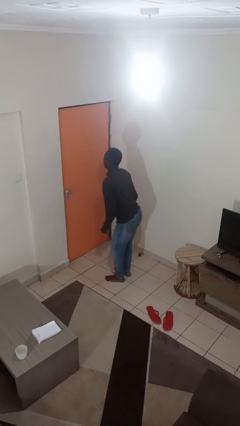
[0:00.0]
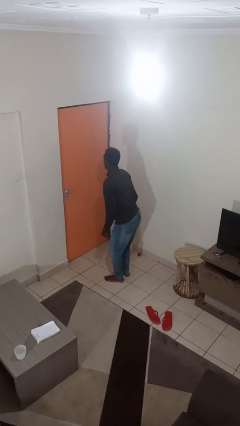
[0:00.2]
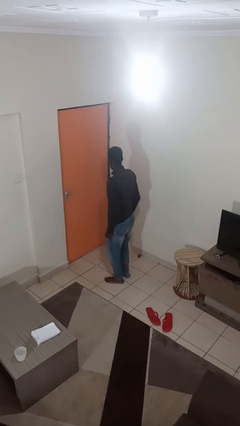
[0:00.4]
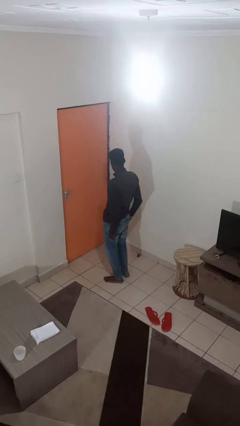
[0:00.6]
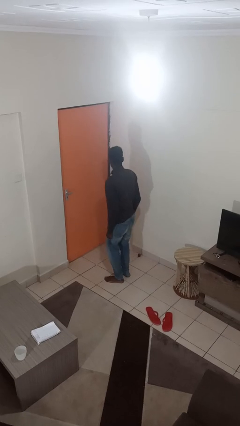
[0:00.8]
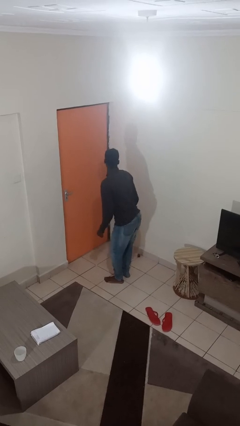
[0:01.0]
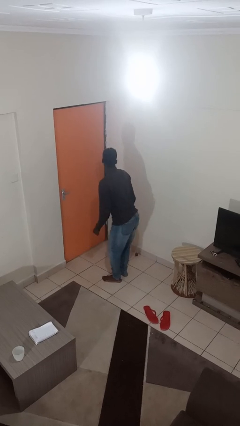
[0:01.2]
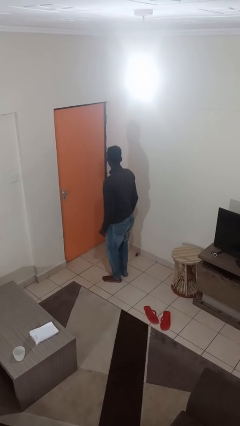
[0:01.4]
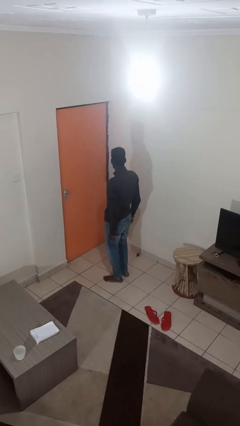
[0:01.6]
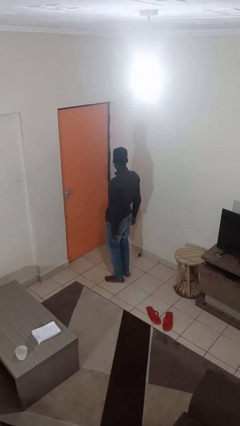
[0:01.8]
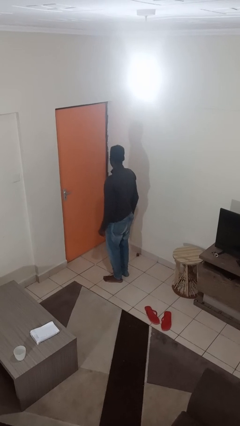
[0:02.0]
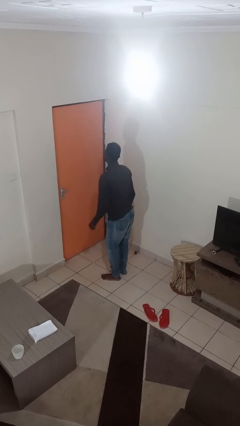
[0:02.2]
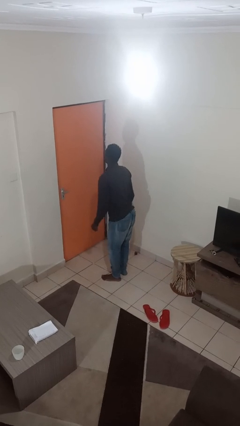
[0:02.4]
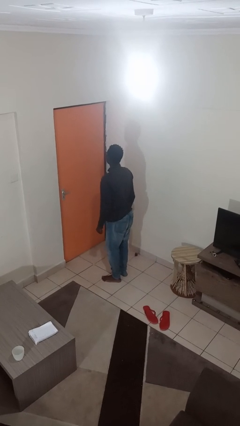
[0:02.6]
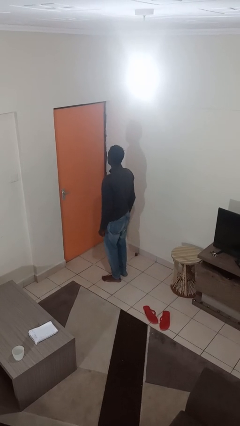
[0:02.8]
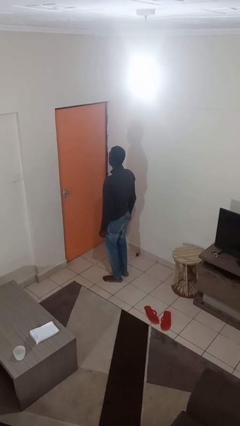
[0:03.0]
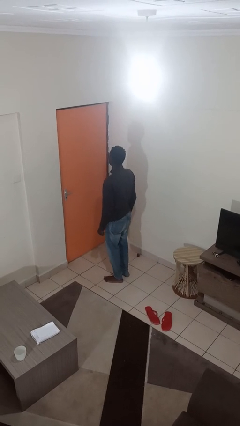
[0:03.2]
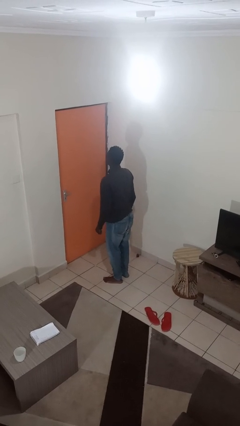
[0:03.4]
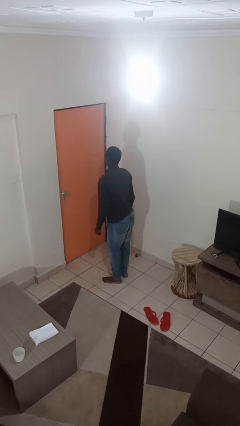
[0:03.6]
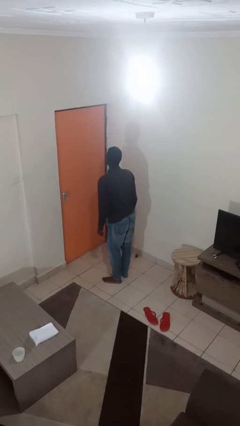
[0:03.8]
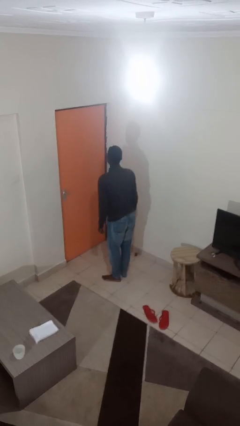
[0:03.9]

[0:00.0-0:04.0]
person wiggles hips

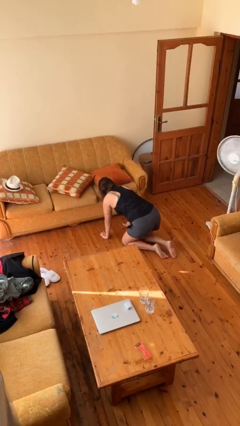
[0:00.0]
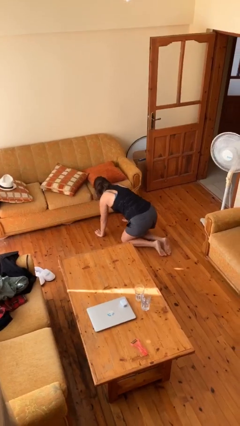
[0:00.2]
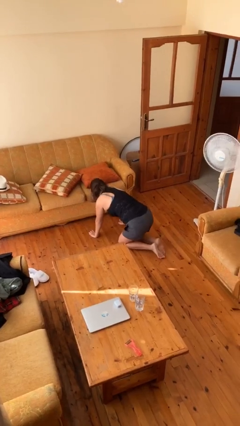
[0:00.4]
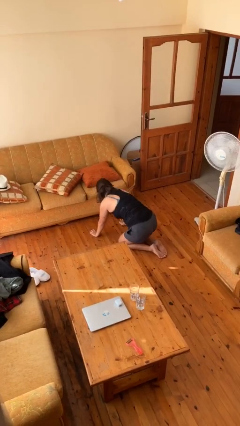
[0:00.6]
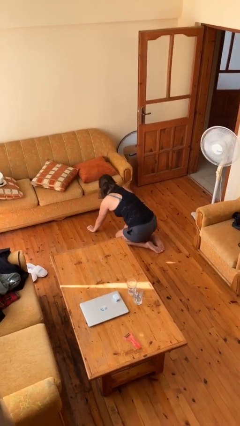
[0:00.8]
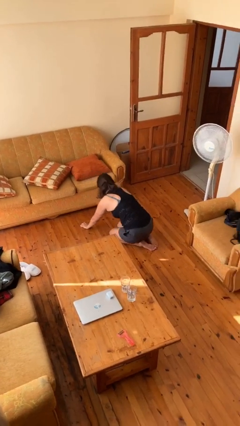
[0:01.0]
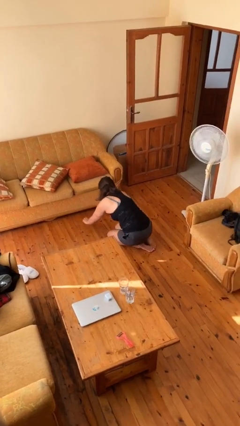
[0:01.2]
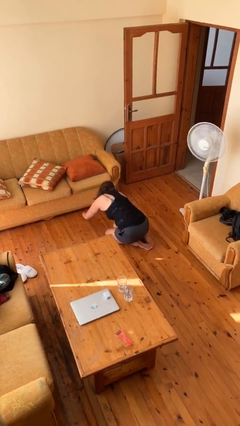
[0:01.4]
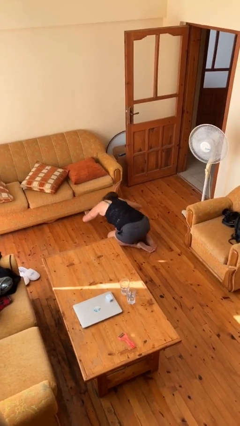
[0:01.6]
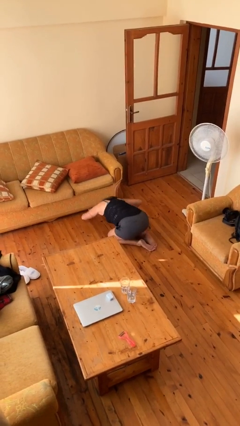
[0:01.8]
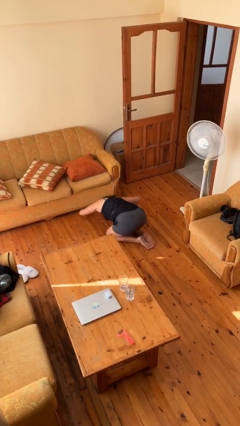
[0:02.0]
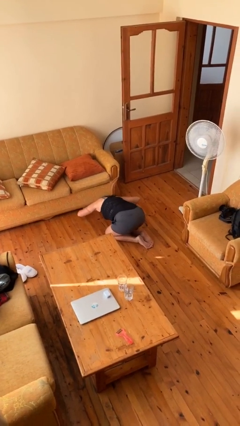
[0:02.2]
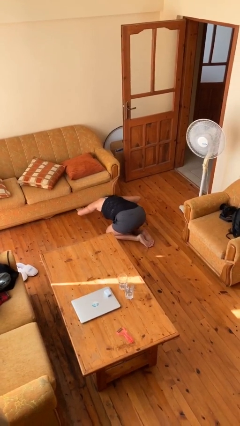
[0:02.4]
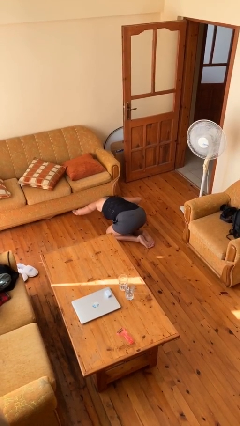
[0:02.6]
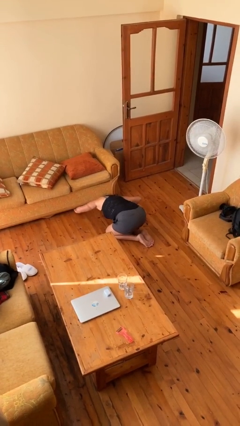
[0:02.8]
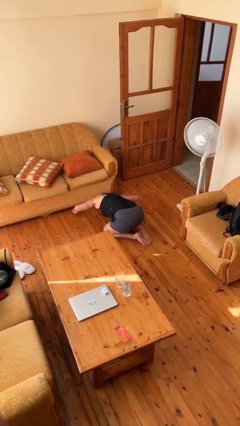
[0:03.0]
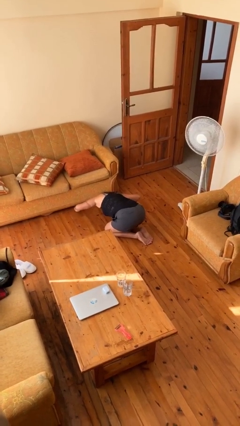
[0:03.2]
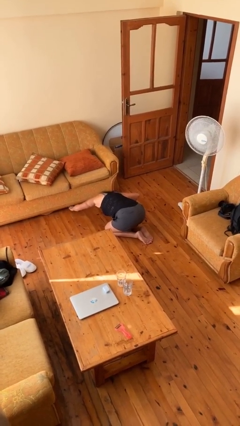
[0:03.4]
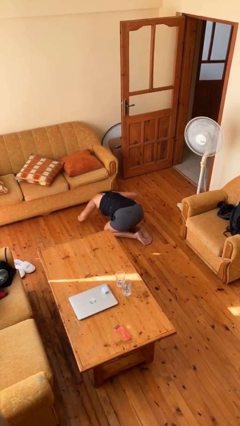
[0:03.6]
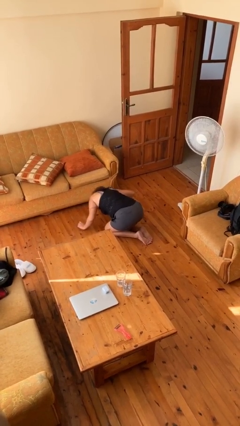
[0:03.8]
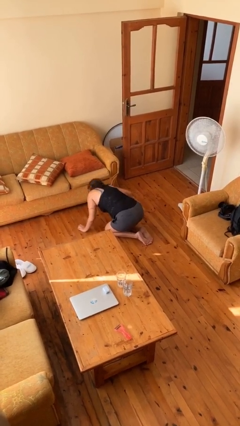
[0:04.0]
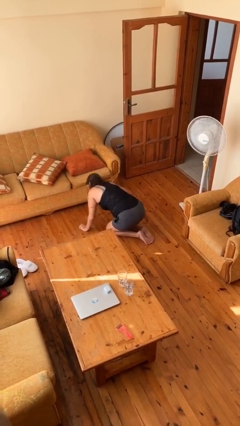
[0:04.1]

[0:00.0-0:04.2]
person searches under couch

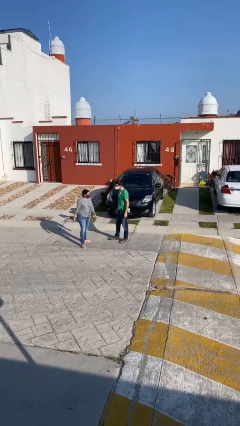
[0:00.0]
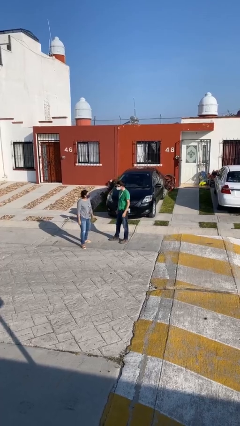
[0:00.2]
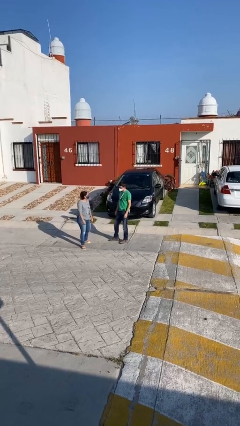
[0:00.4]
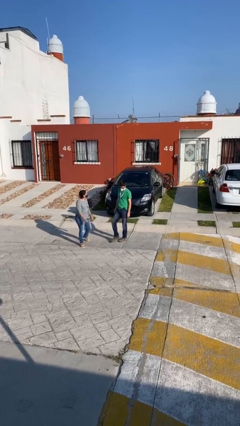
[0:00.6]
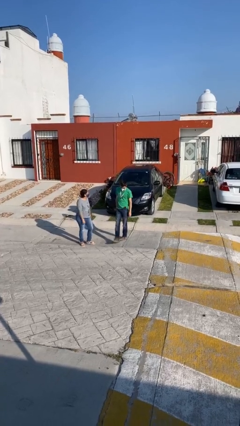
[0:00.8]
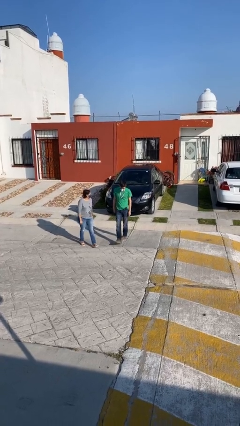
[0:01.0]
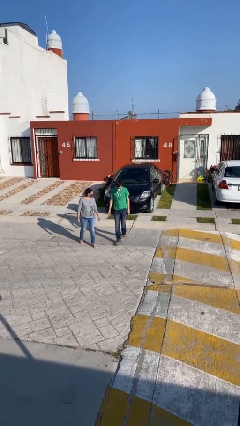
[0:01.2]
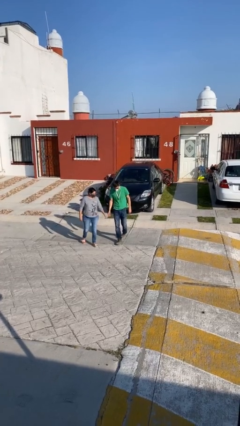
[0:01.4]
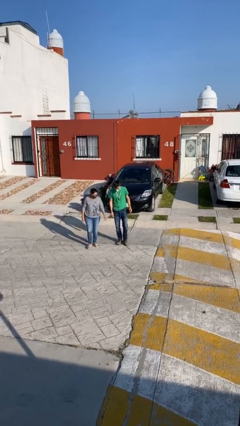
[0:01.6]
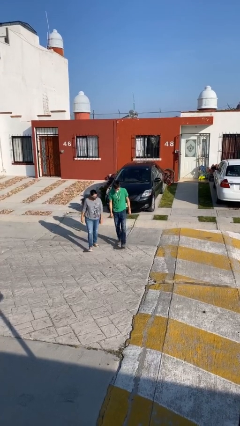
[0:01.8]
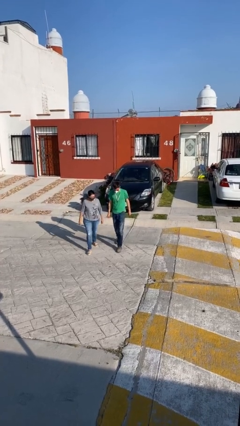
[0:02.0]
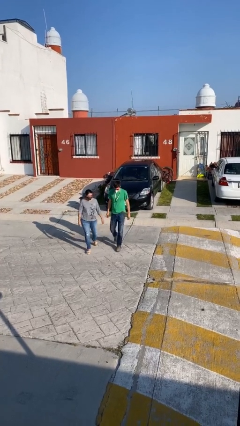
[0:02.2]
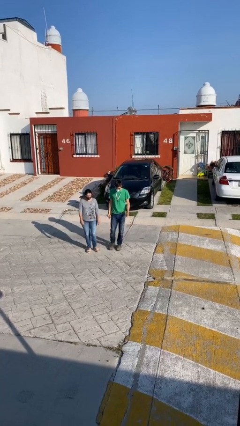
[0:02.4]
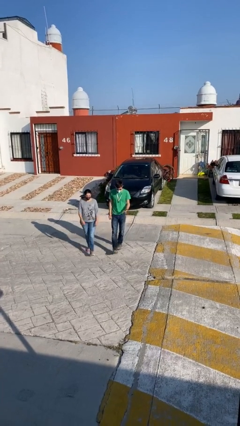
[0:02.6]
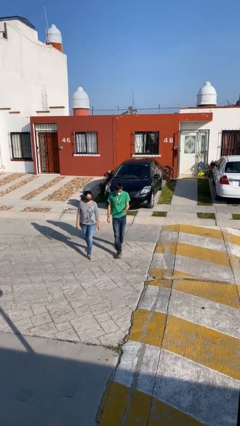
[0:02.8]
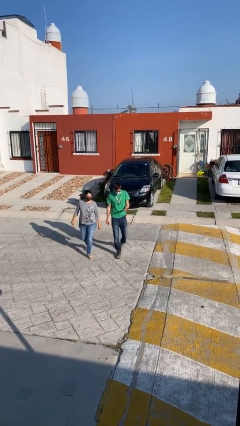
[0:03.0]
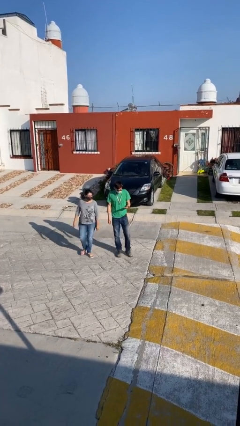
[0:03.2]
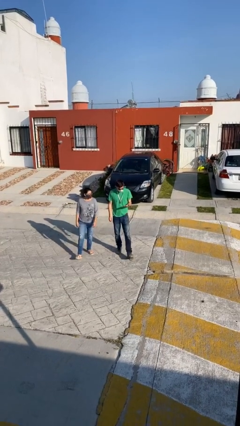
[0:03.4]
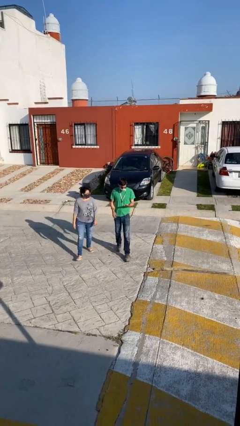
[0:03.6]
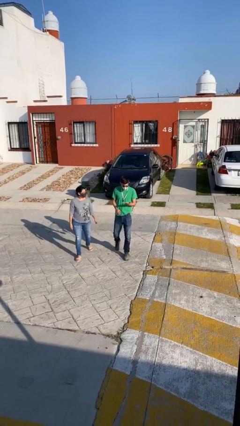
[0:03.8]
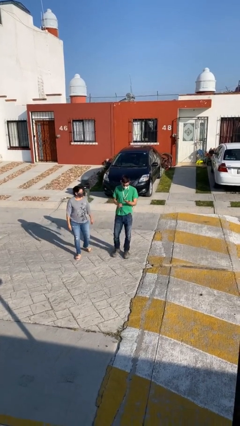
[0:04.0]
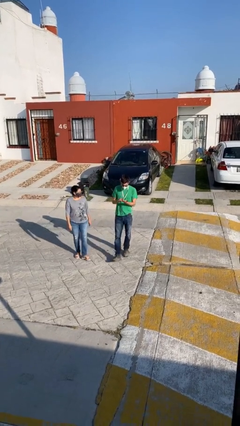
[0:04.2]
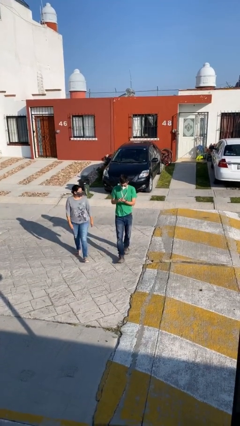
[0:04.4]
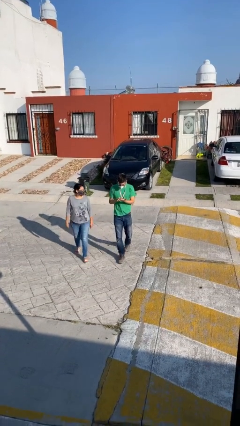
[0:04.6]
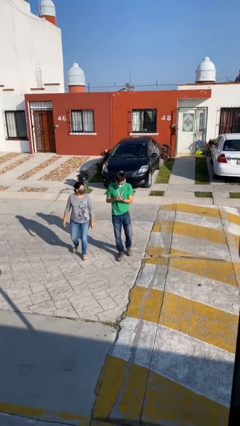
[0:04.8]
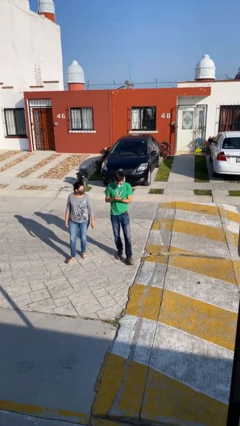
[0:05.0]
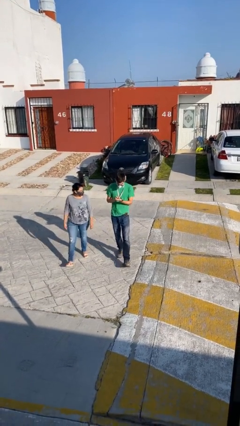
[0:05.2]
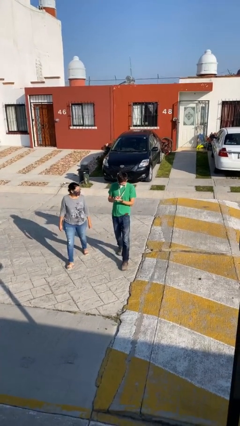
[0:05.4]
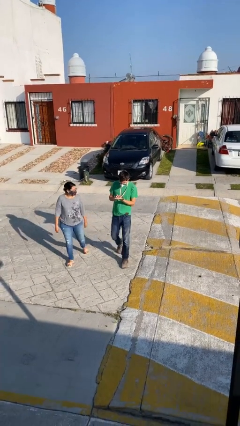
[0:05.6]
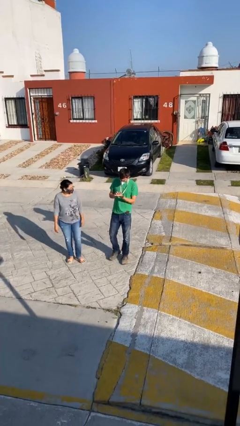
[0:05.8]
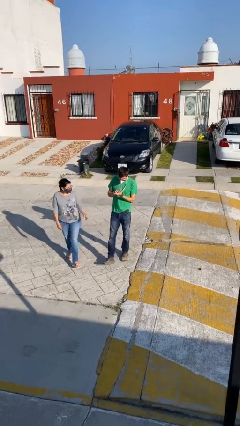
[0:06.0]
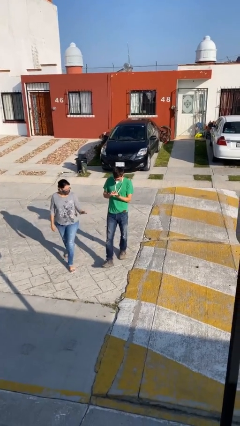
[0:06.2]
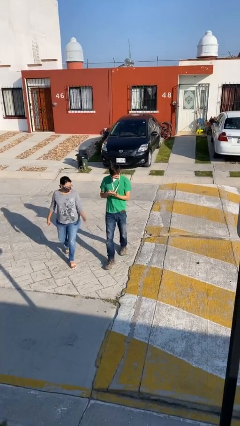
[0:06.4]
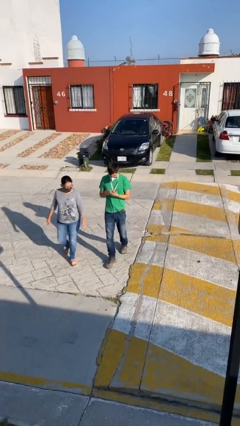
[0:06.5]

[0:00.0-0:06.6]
person talks to person

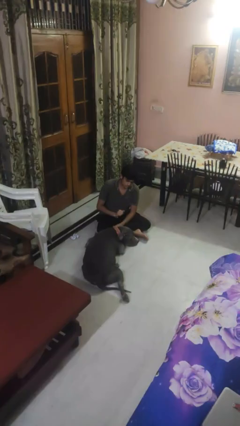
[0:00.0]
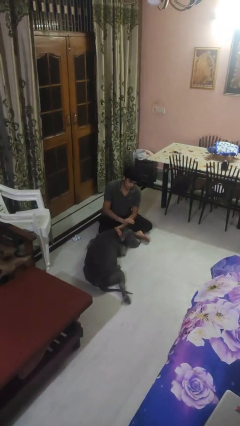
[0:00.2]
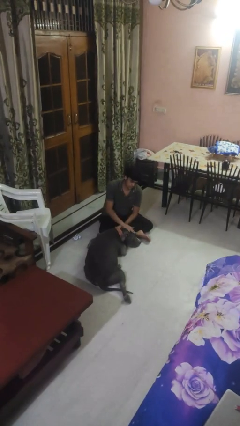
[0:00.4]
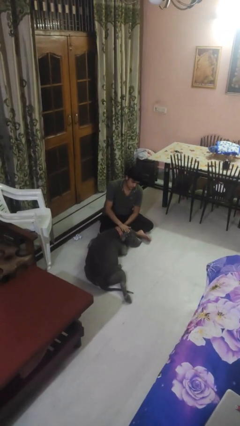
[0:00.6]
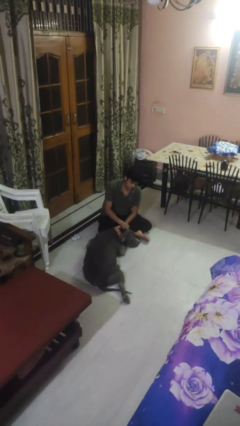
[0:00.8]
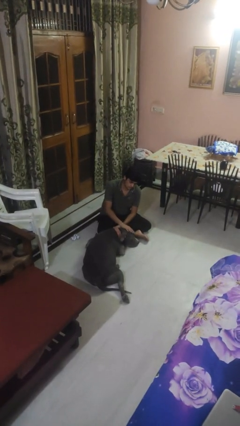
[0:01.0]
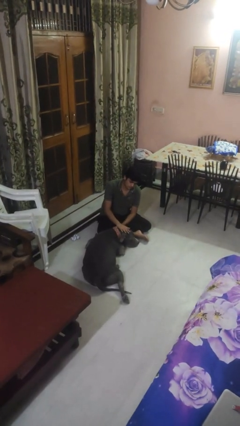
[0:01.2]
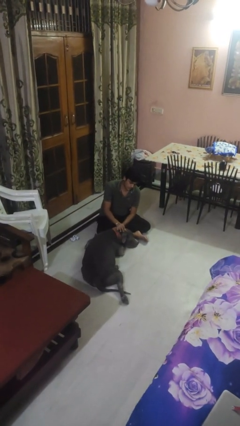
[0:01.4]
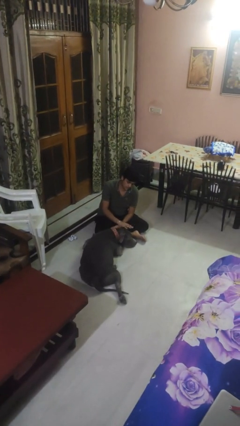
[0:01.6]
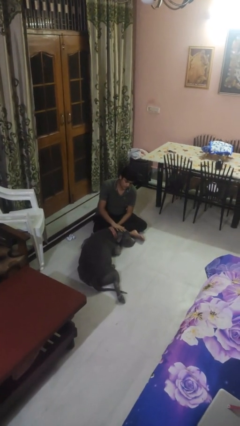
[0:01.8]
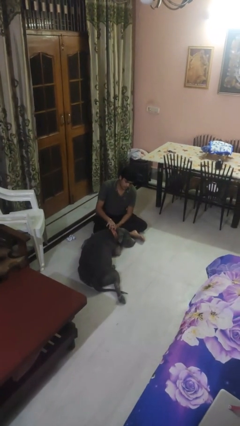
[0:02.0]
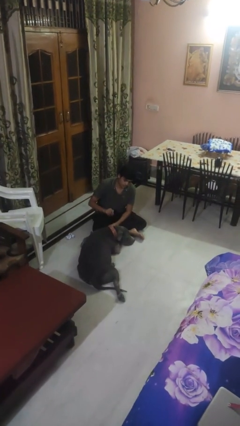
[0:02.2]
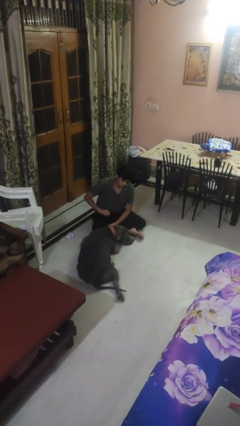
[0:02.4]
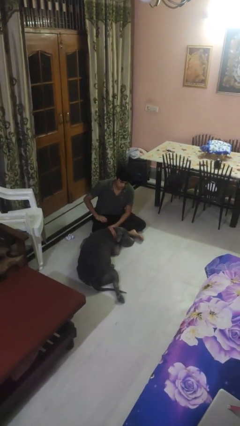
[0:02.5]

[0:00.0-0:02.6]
person pets dog

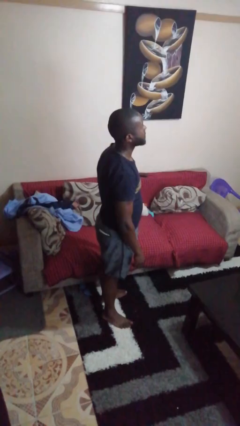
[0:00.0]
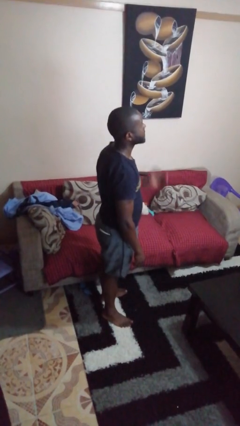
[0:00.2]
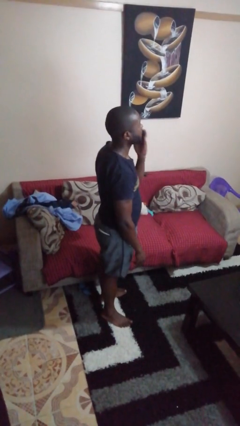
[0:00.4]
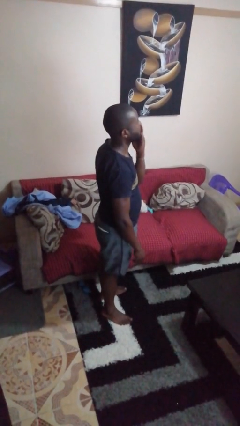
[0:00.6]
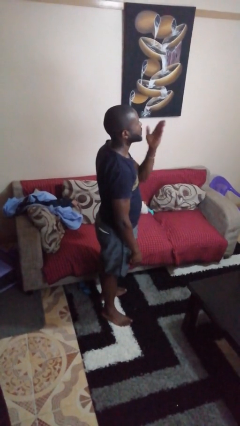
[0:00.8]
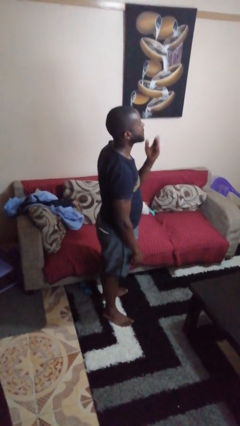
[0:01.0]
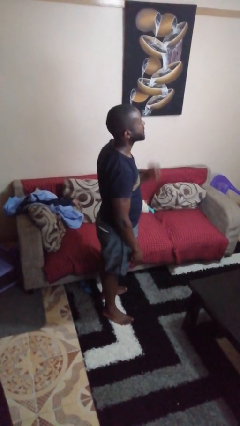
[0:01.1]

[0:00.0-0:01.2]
person gestures blow kiss
